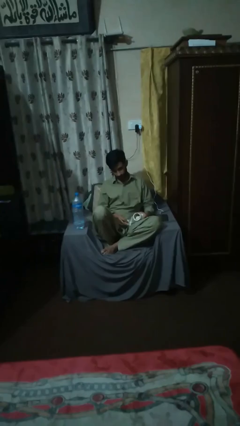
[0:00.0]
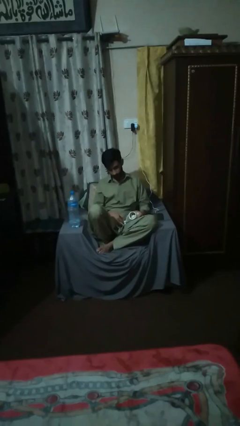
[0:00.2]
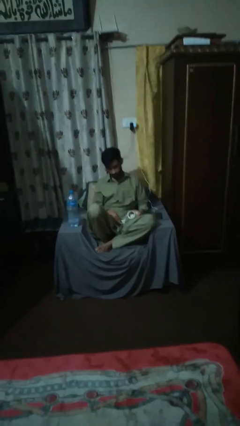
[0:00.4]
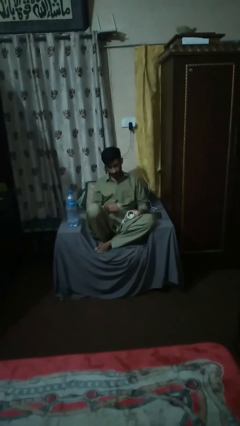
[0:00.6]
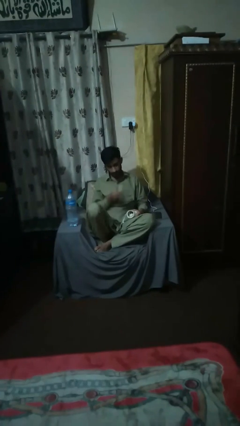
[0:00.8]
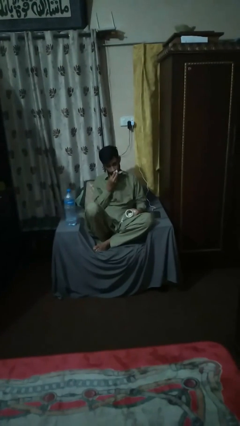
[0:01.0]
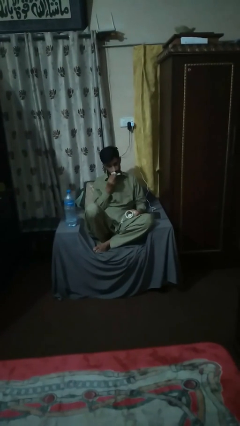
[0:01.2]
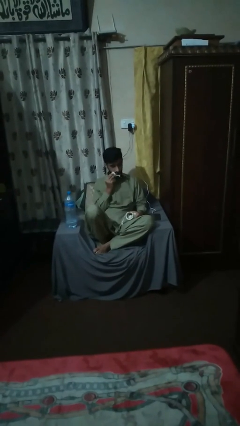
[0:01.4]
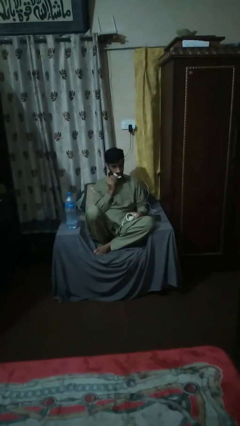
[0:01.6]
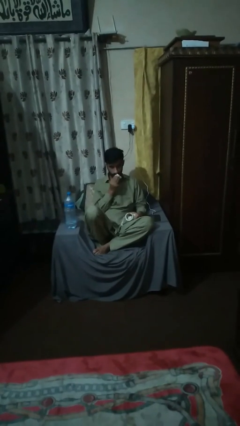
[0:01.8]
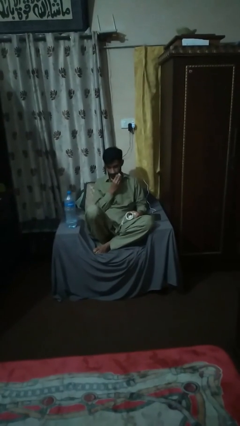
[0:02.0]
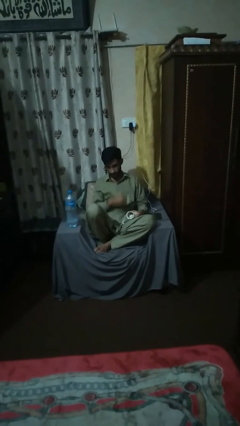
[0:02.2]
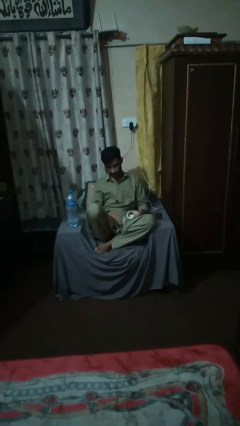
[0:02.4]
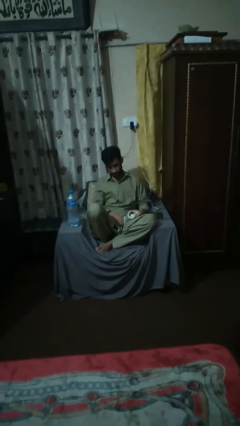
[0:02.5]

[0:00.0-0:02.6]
person wipes mouth with napkin

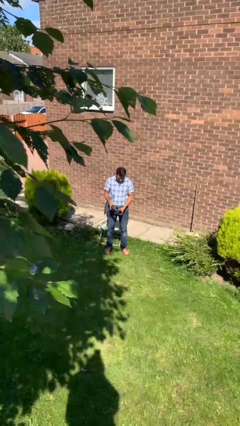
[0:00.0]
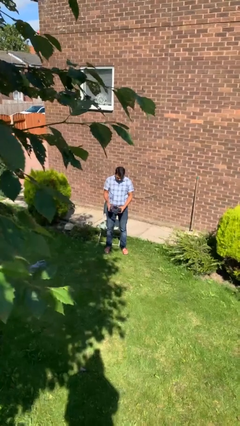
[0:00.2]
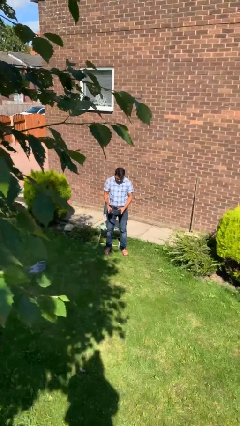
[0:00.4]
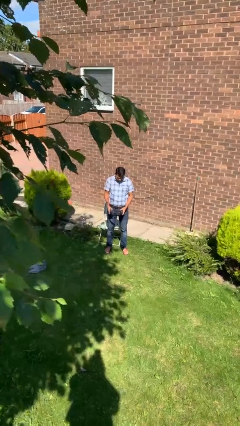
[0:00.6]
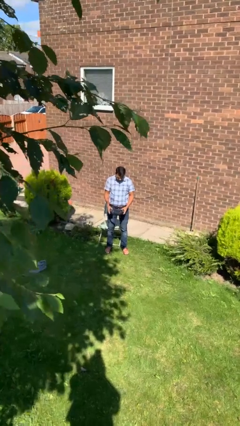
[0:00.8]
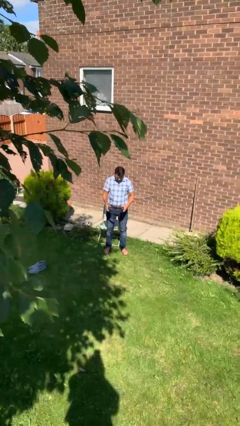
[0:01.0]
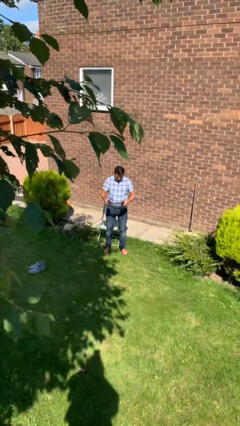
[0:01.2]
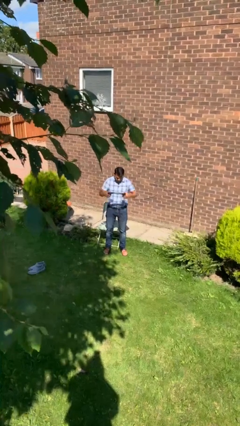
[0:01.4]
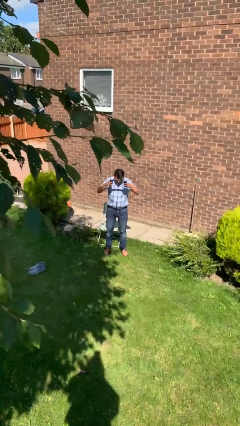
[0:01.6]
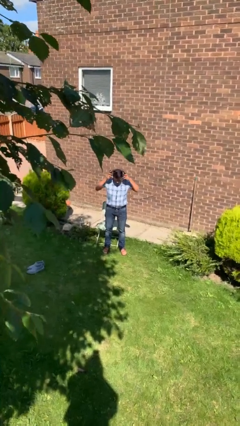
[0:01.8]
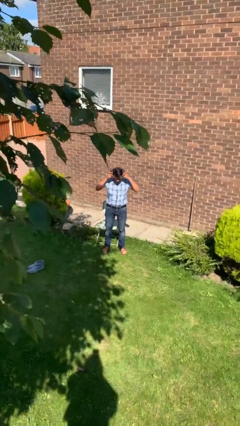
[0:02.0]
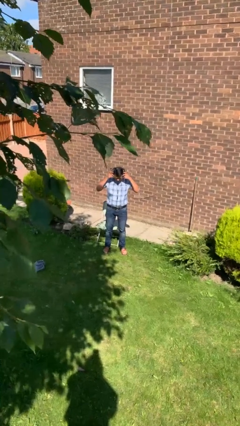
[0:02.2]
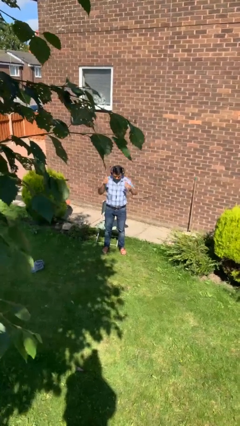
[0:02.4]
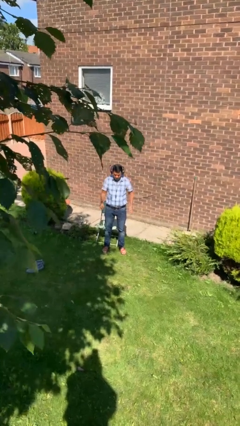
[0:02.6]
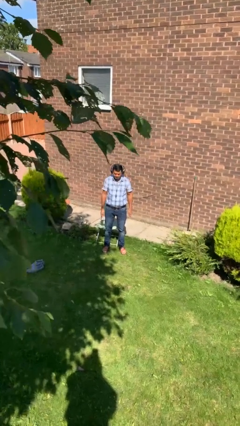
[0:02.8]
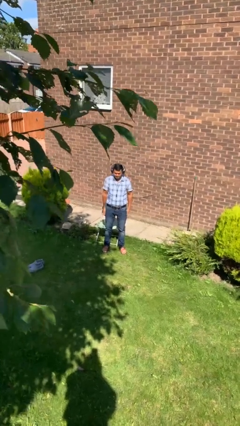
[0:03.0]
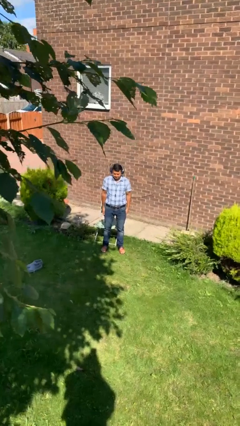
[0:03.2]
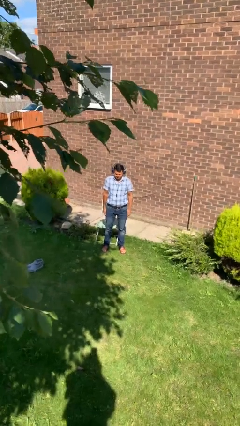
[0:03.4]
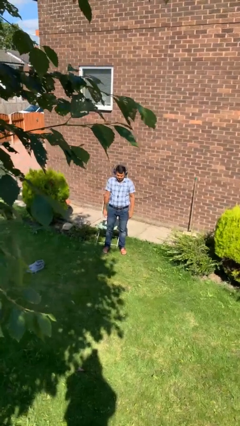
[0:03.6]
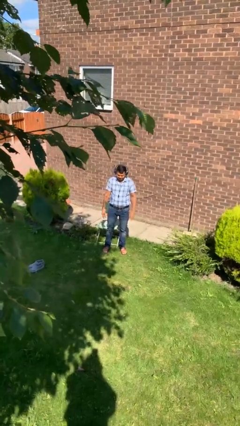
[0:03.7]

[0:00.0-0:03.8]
person puts on headphones

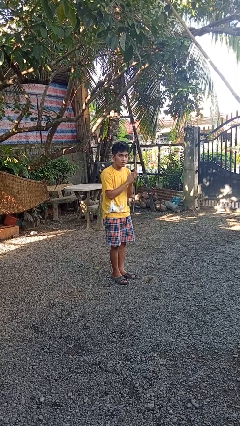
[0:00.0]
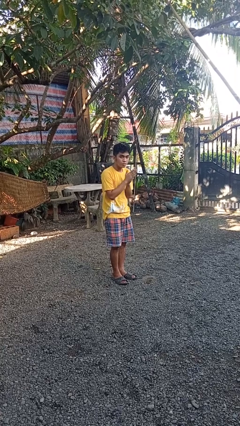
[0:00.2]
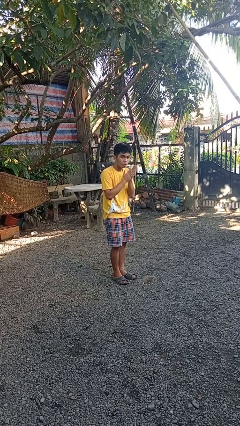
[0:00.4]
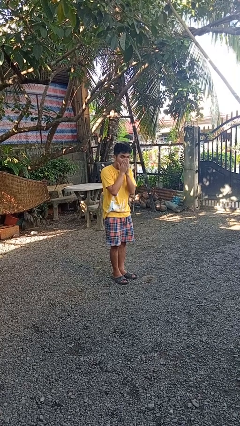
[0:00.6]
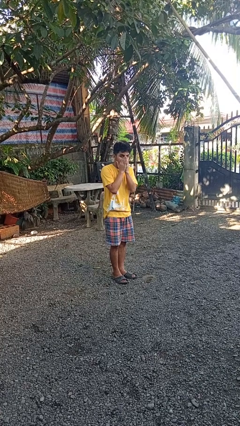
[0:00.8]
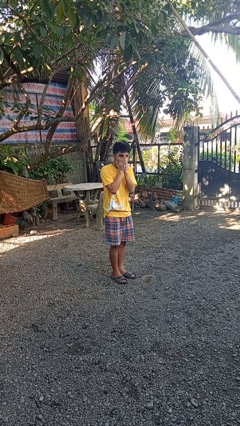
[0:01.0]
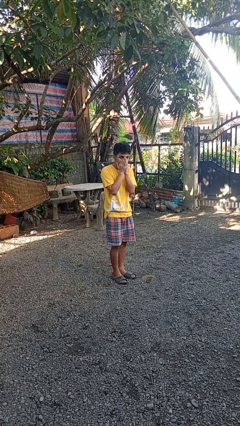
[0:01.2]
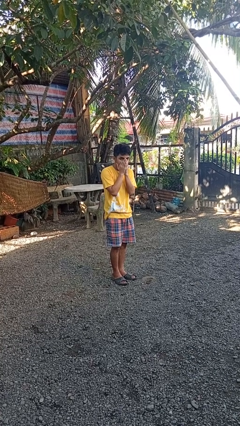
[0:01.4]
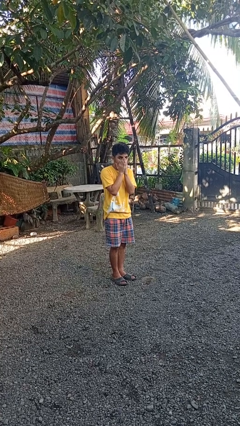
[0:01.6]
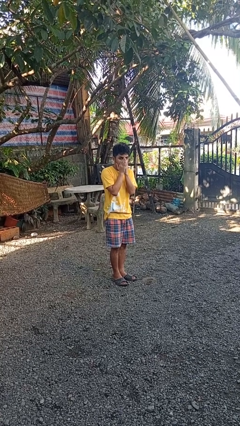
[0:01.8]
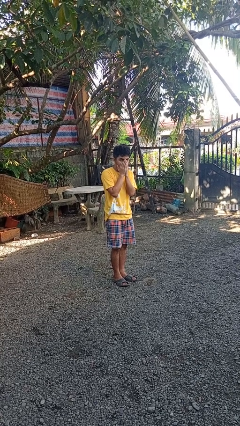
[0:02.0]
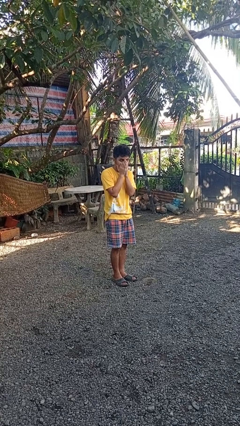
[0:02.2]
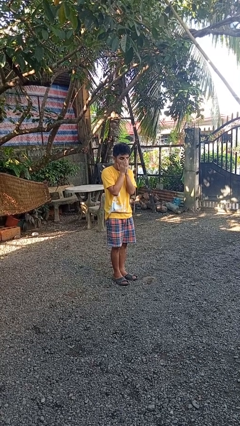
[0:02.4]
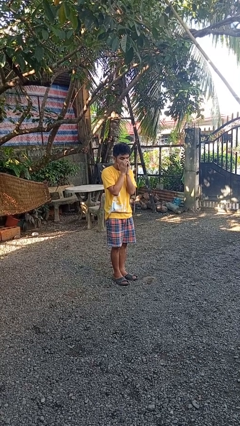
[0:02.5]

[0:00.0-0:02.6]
person blows into hands

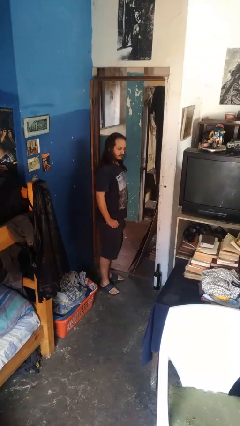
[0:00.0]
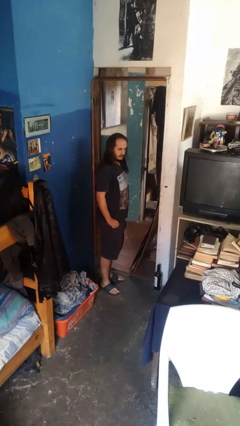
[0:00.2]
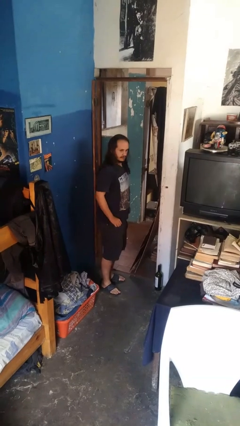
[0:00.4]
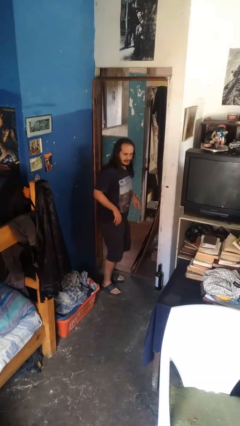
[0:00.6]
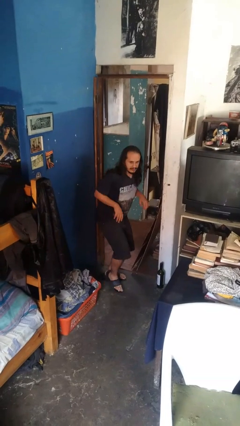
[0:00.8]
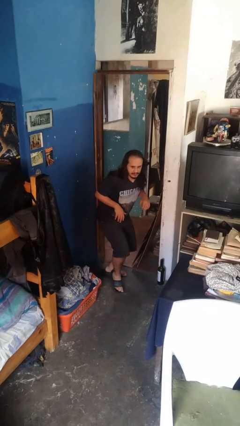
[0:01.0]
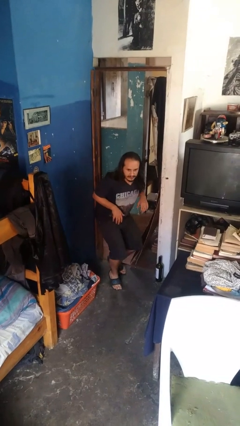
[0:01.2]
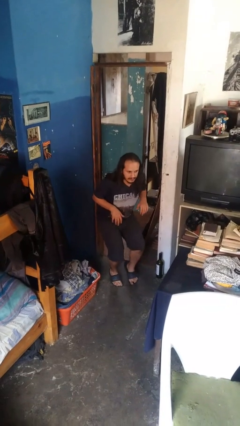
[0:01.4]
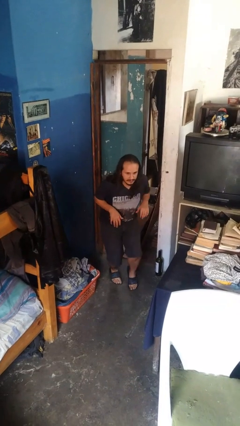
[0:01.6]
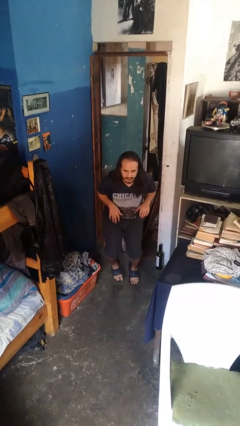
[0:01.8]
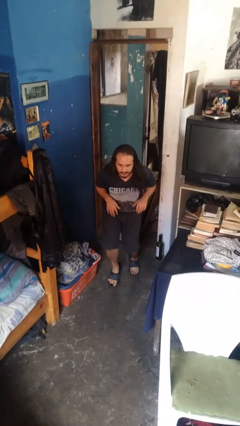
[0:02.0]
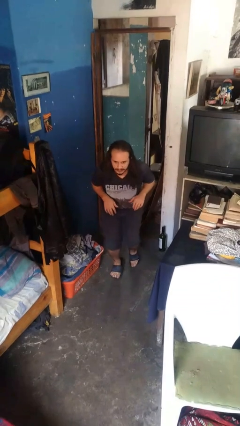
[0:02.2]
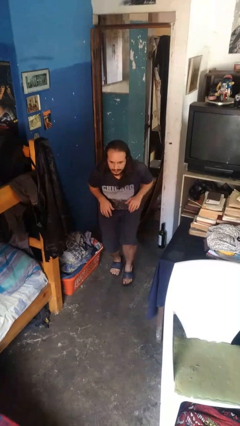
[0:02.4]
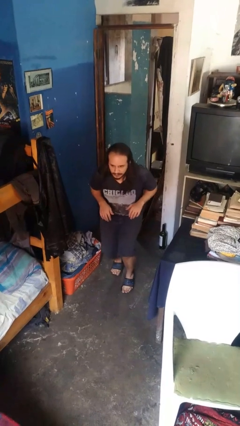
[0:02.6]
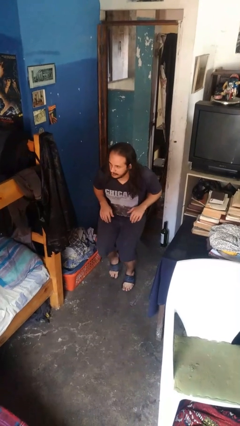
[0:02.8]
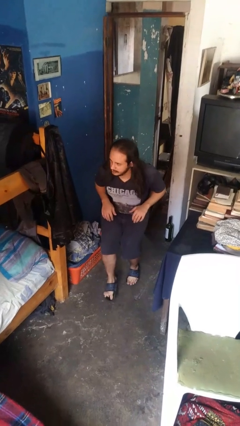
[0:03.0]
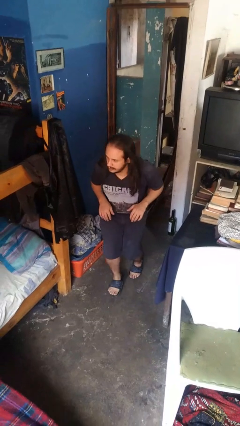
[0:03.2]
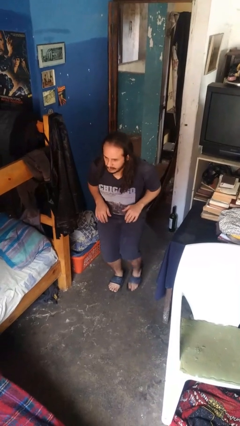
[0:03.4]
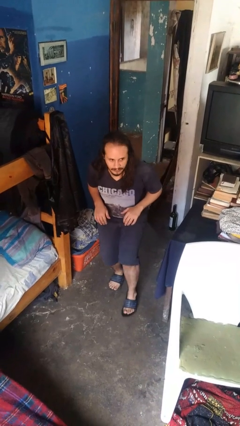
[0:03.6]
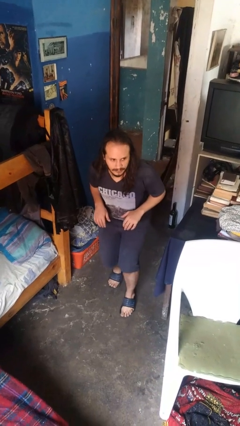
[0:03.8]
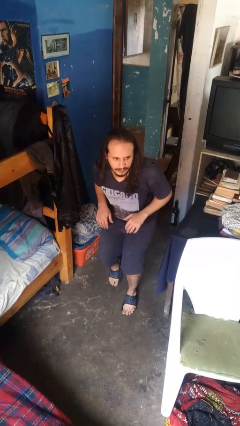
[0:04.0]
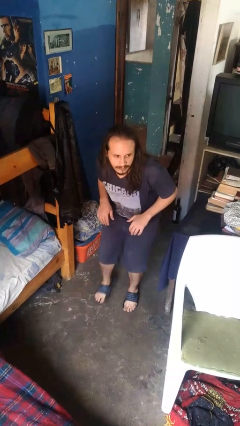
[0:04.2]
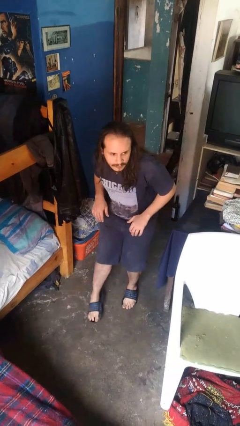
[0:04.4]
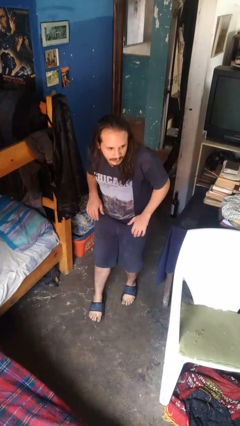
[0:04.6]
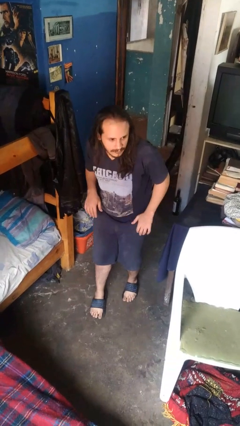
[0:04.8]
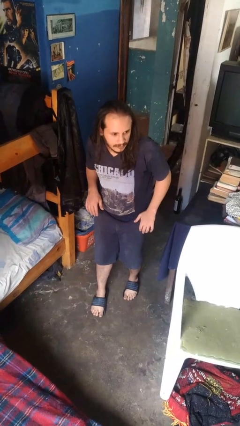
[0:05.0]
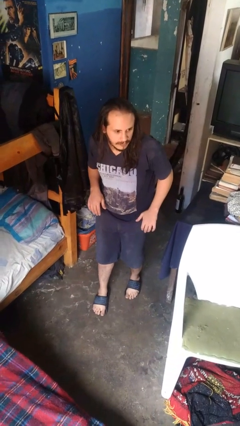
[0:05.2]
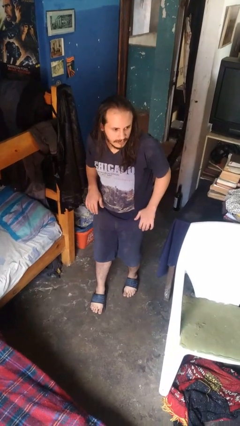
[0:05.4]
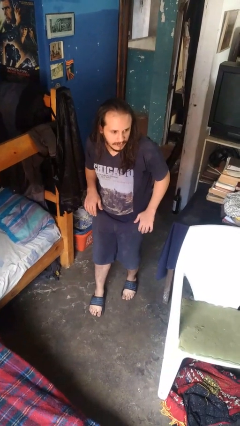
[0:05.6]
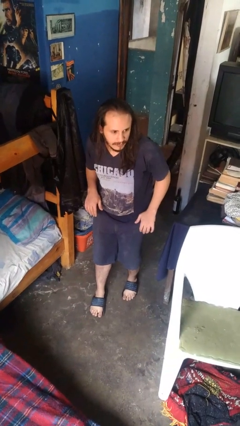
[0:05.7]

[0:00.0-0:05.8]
person walks tiptoe

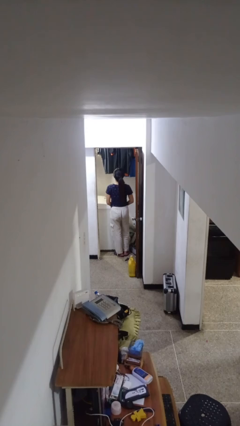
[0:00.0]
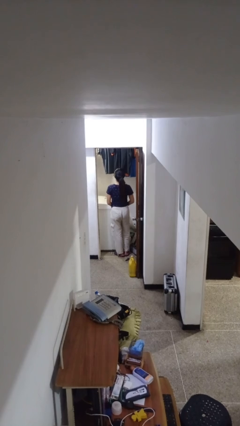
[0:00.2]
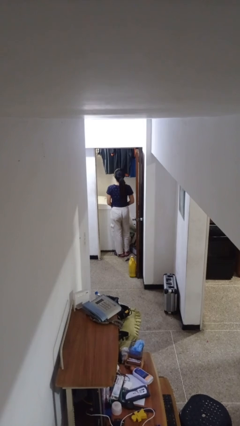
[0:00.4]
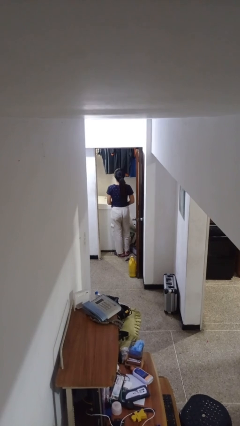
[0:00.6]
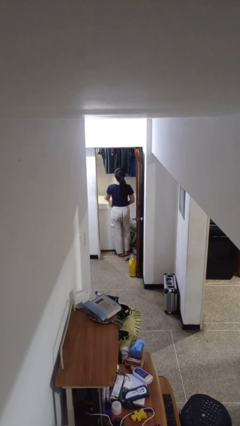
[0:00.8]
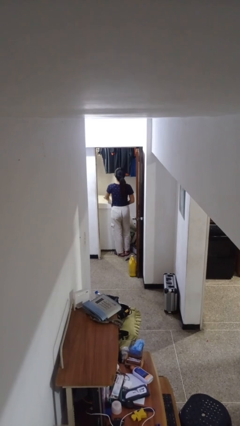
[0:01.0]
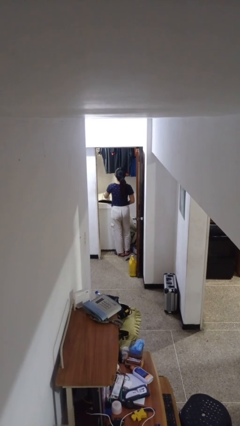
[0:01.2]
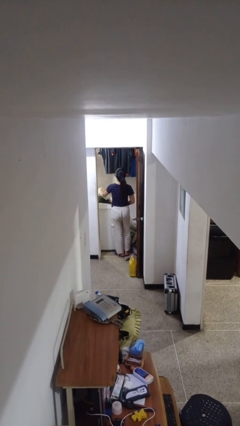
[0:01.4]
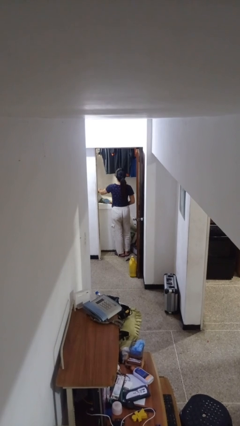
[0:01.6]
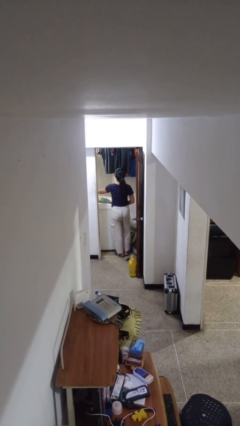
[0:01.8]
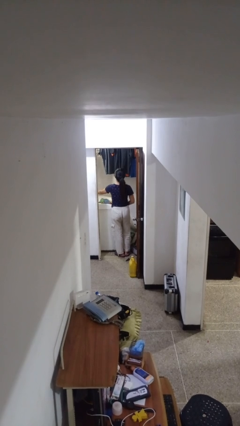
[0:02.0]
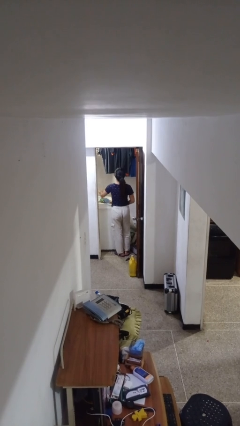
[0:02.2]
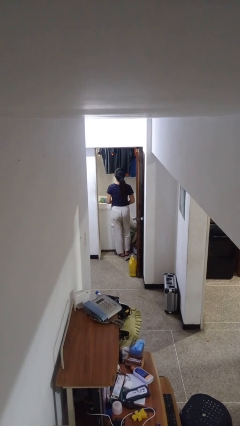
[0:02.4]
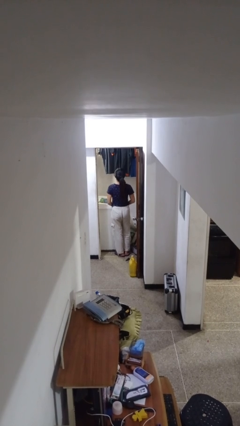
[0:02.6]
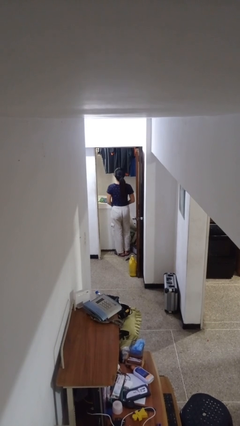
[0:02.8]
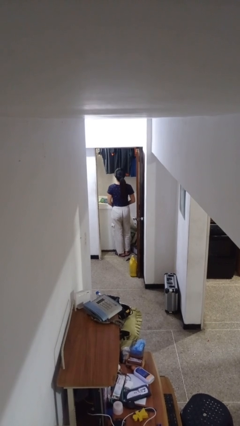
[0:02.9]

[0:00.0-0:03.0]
person opens clothes washer
